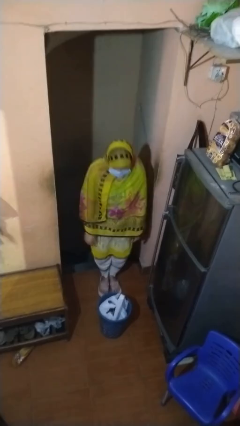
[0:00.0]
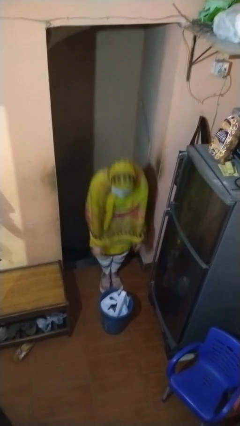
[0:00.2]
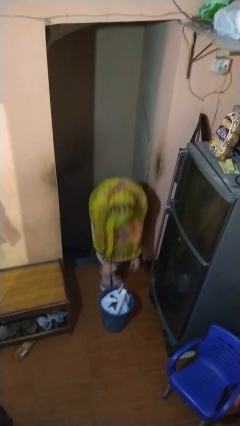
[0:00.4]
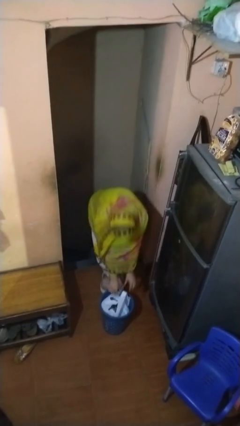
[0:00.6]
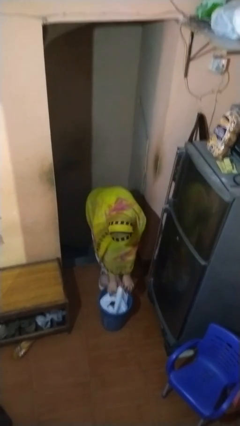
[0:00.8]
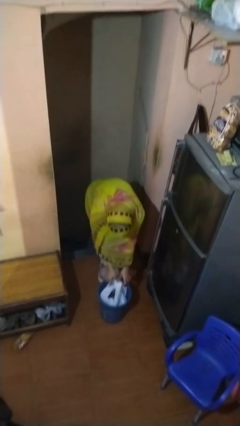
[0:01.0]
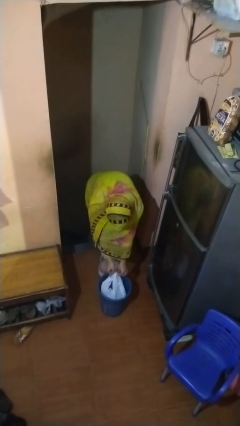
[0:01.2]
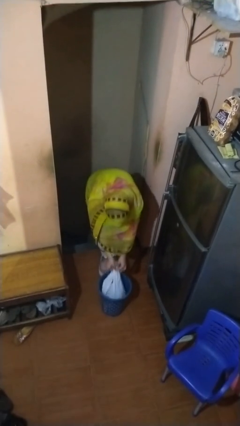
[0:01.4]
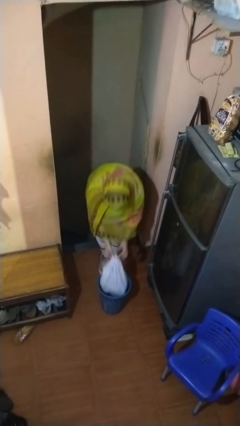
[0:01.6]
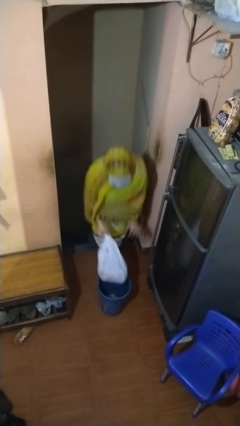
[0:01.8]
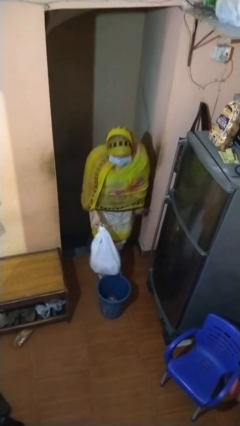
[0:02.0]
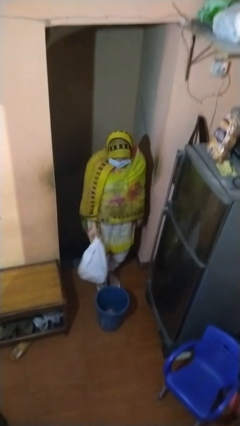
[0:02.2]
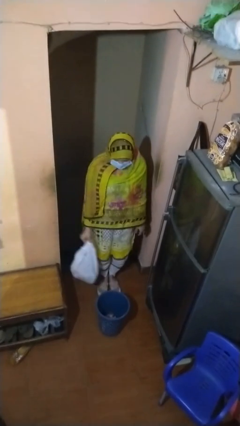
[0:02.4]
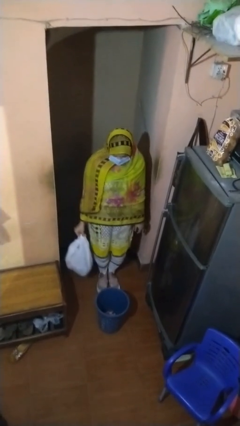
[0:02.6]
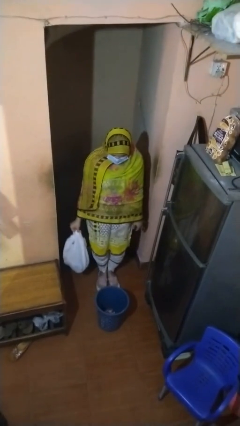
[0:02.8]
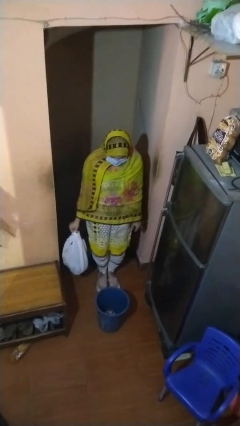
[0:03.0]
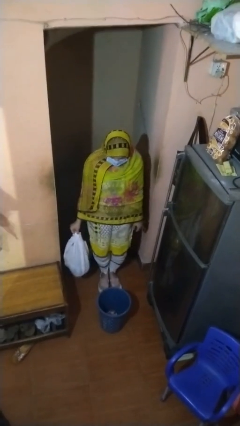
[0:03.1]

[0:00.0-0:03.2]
person removes trashbag from trashcan

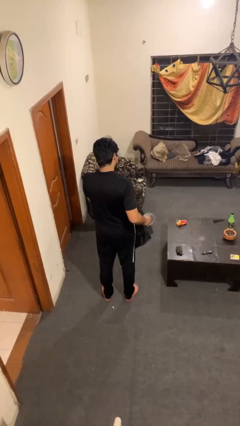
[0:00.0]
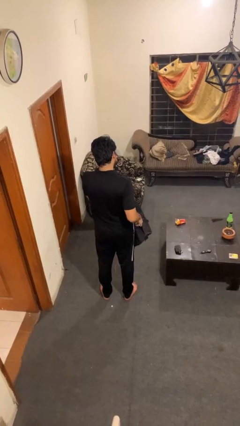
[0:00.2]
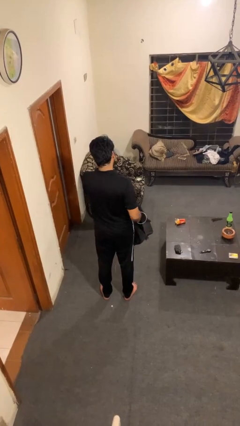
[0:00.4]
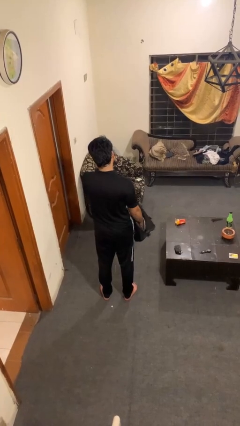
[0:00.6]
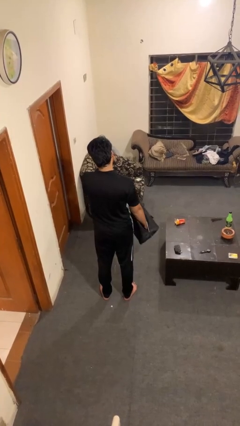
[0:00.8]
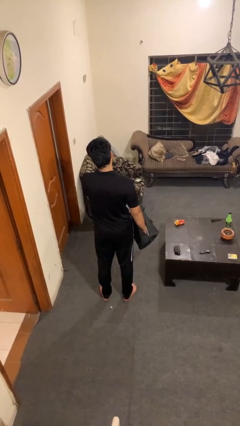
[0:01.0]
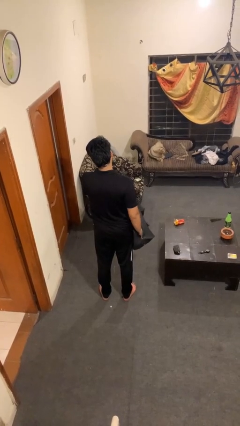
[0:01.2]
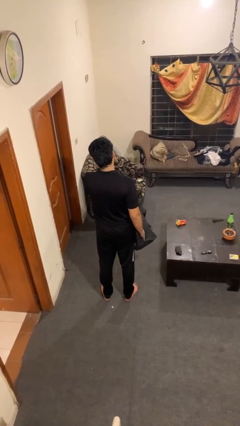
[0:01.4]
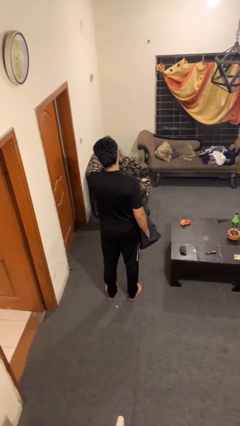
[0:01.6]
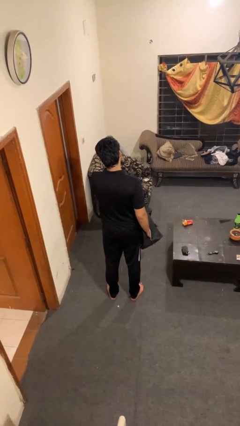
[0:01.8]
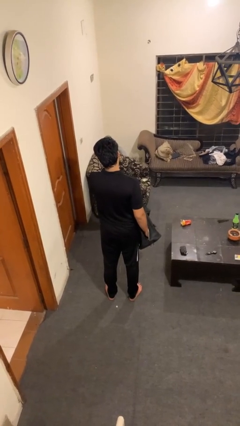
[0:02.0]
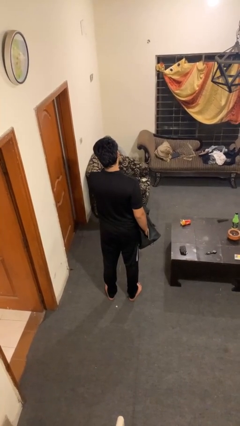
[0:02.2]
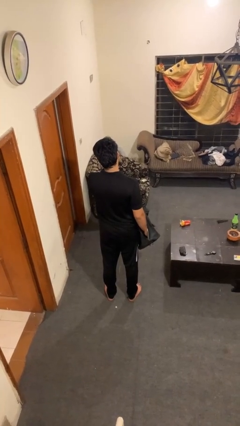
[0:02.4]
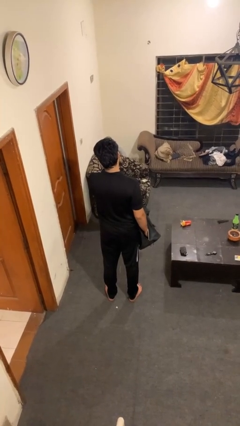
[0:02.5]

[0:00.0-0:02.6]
person puts object into bag

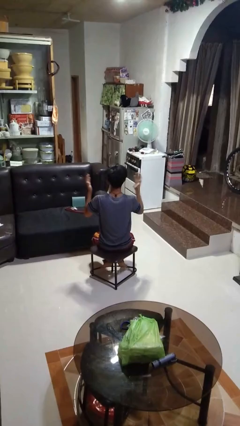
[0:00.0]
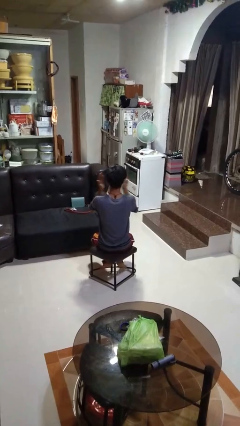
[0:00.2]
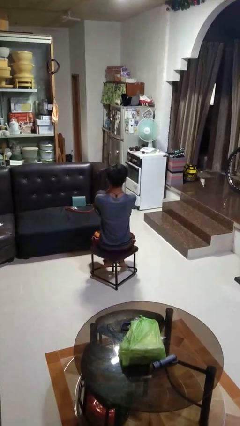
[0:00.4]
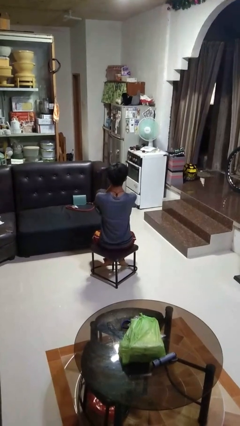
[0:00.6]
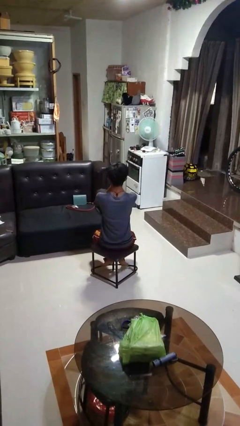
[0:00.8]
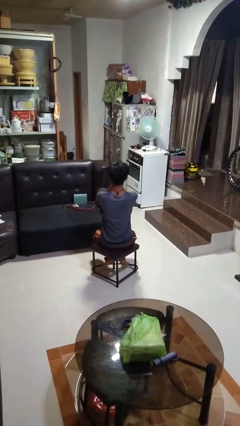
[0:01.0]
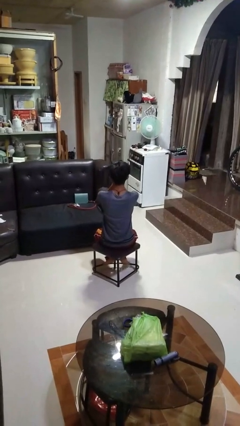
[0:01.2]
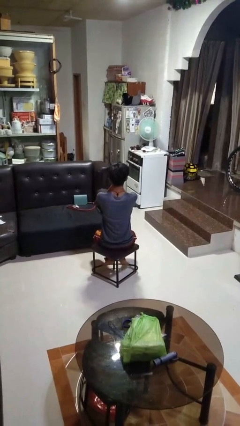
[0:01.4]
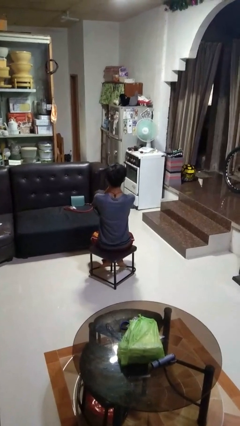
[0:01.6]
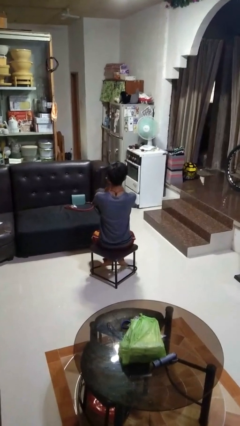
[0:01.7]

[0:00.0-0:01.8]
person covers face with hands

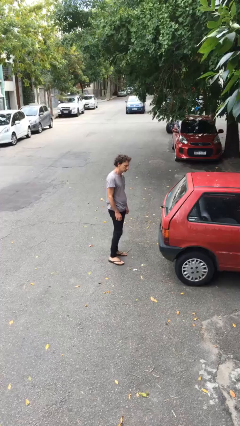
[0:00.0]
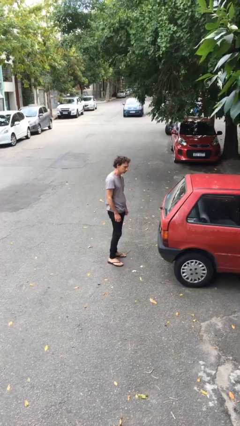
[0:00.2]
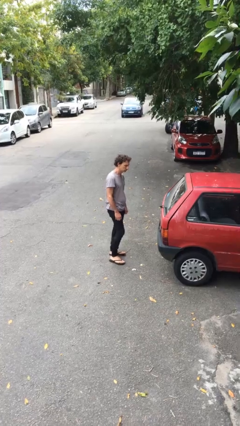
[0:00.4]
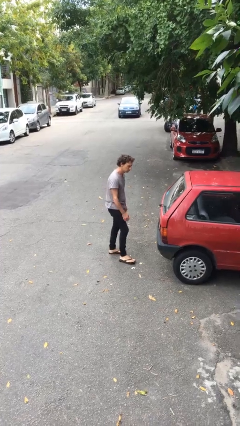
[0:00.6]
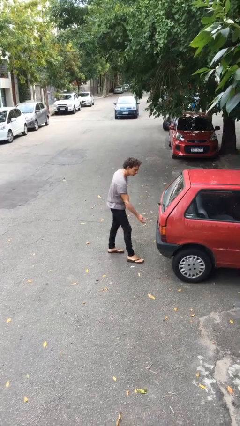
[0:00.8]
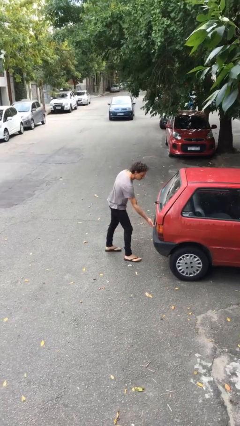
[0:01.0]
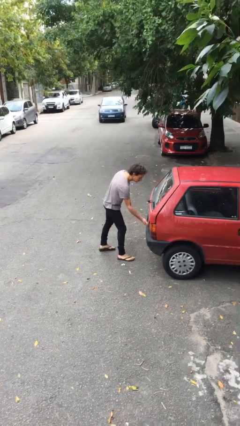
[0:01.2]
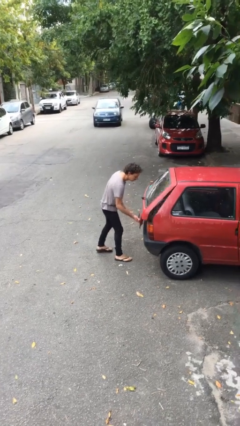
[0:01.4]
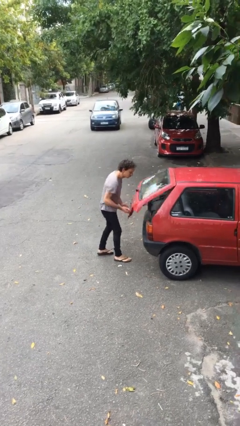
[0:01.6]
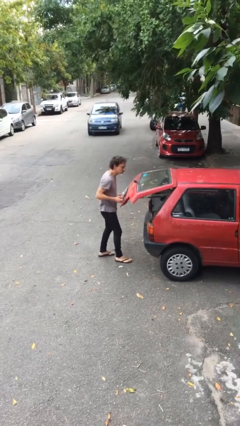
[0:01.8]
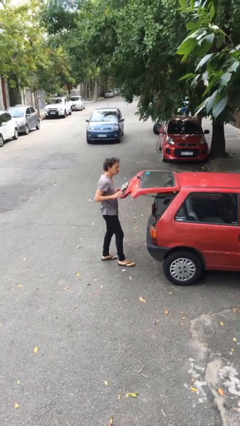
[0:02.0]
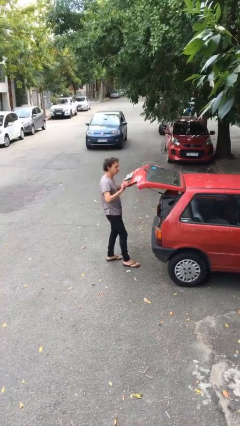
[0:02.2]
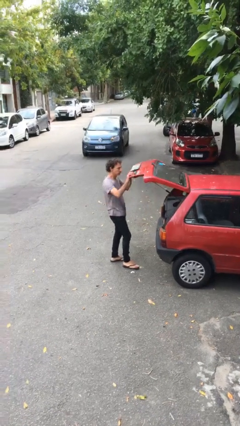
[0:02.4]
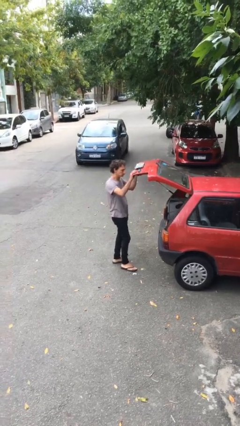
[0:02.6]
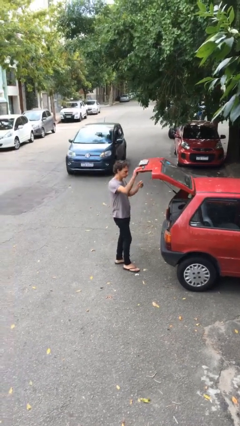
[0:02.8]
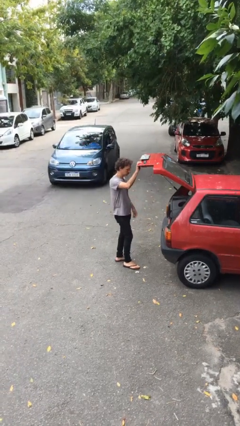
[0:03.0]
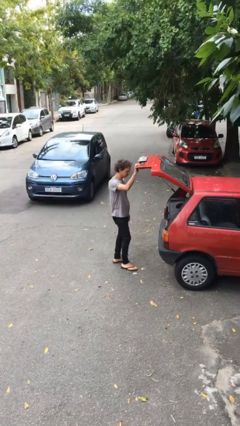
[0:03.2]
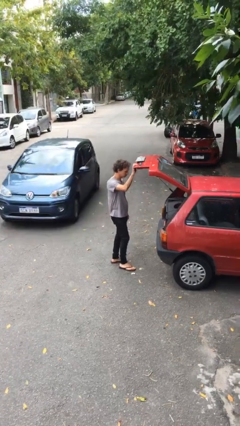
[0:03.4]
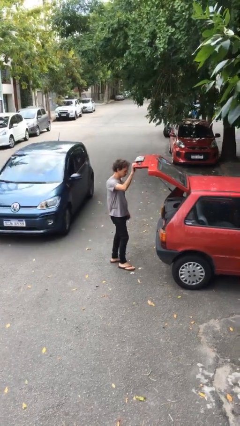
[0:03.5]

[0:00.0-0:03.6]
person opens car trunk

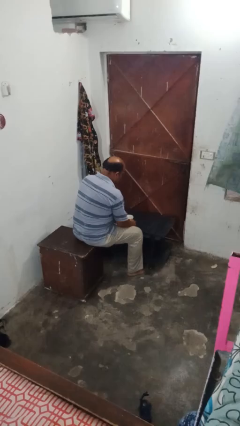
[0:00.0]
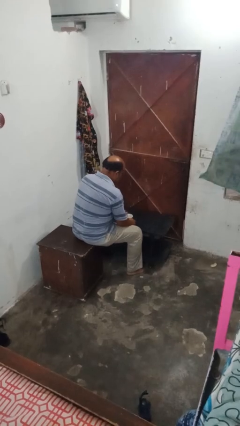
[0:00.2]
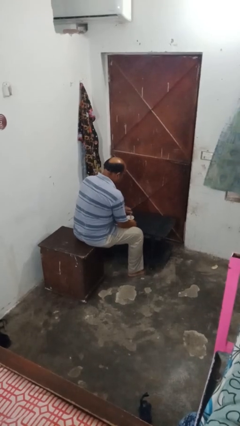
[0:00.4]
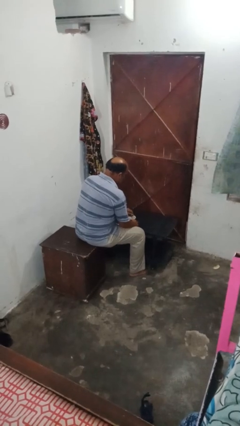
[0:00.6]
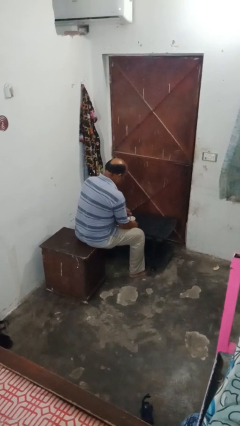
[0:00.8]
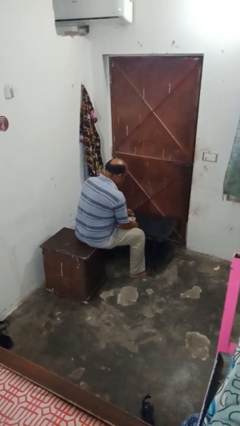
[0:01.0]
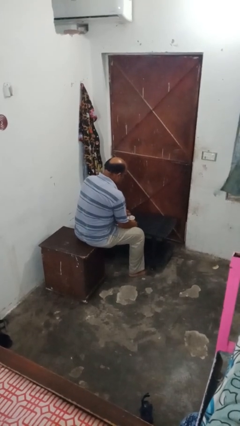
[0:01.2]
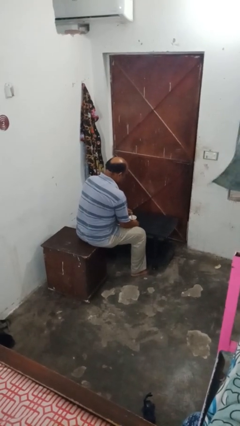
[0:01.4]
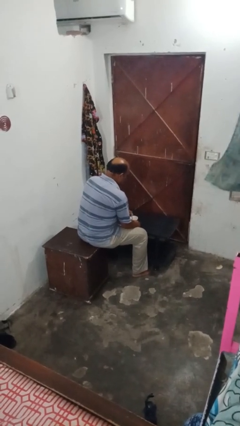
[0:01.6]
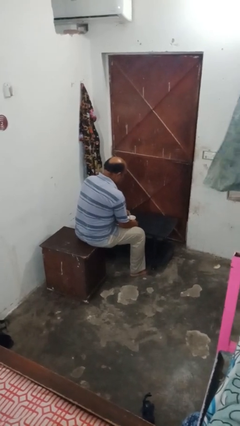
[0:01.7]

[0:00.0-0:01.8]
person stirs mug

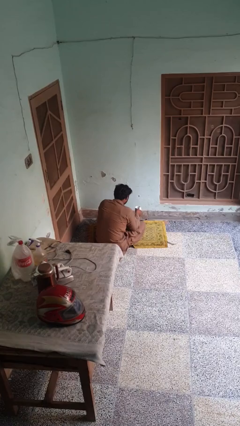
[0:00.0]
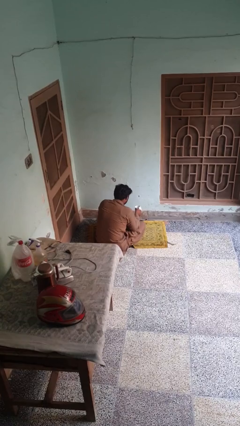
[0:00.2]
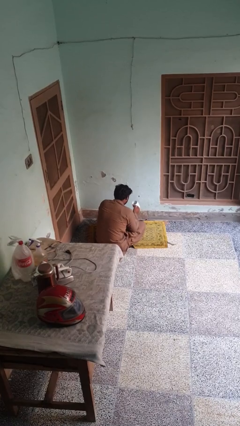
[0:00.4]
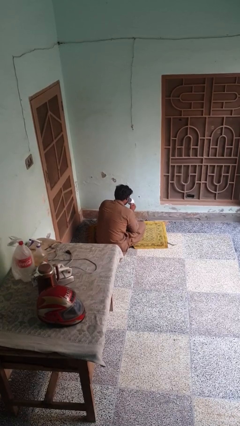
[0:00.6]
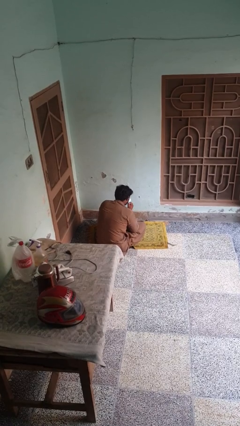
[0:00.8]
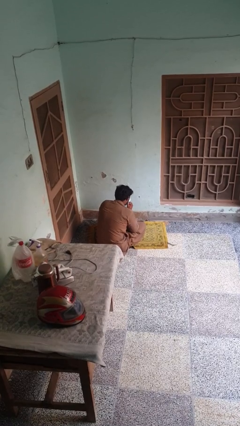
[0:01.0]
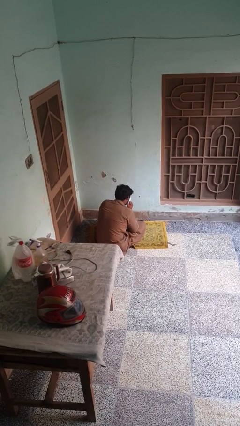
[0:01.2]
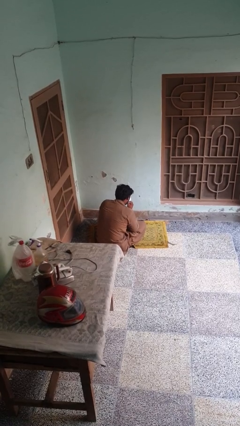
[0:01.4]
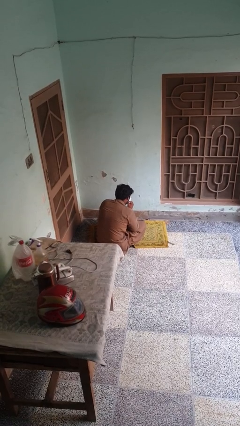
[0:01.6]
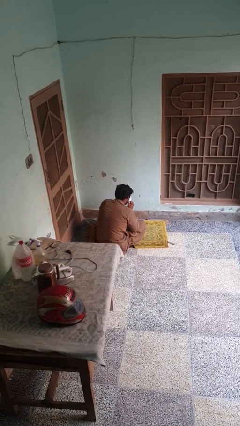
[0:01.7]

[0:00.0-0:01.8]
person drinks from mug

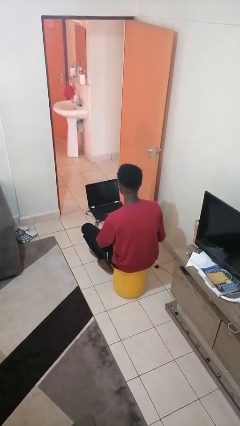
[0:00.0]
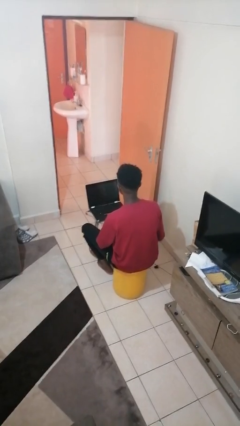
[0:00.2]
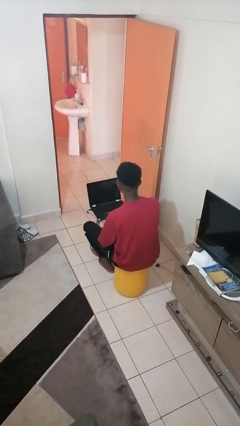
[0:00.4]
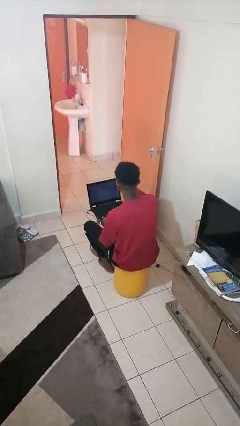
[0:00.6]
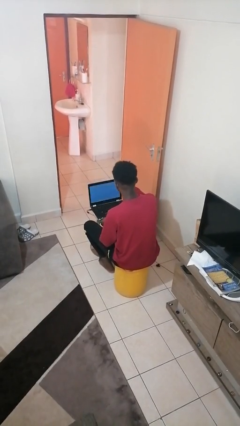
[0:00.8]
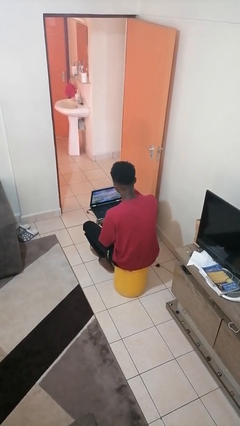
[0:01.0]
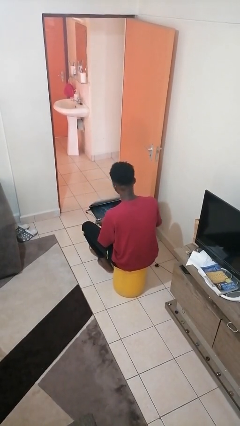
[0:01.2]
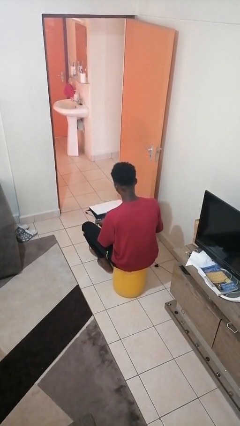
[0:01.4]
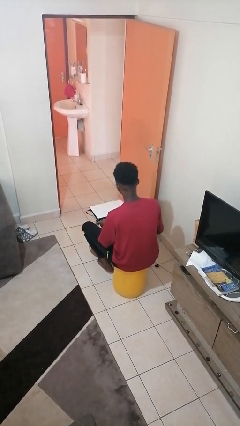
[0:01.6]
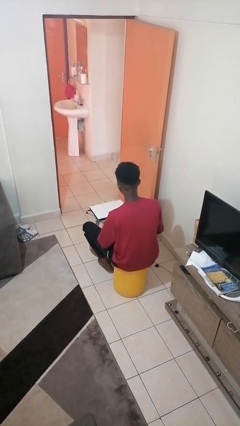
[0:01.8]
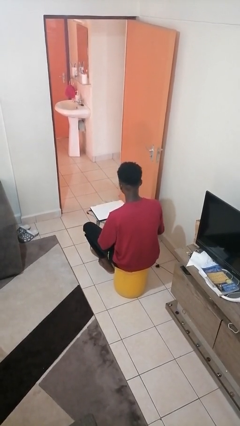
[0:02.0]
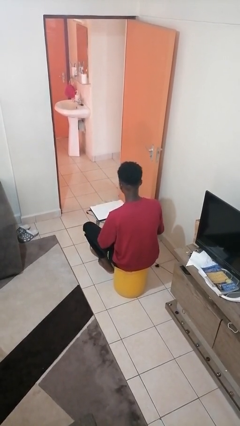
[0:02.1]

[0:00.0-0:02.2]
person closes laptop
